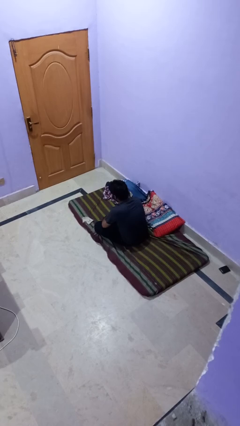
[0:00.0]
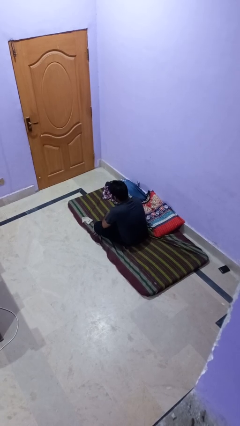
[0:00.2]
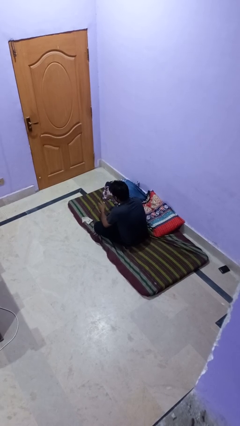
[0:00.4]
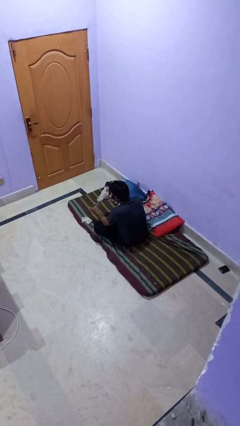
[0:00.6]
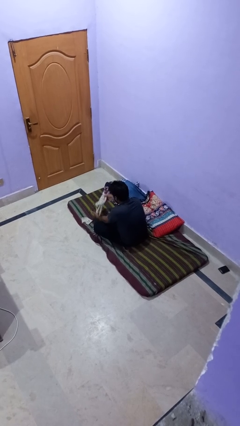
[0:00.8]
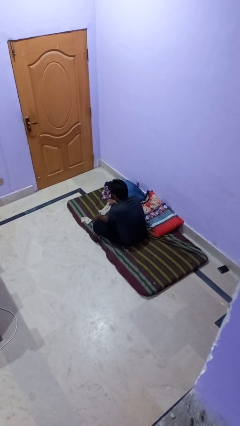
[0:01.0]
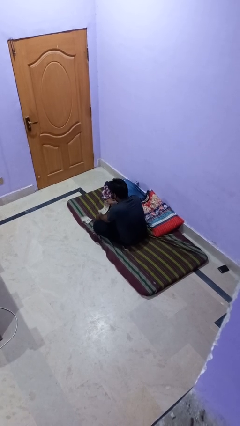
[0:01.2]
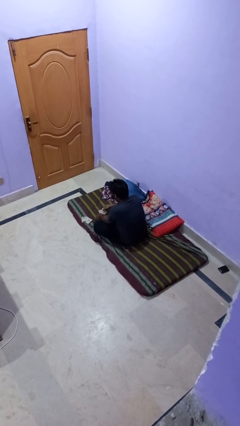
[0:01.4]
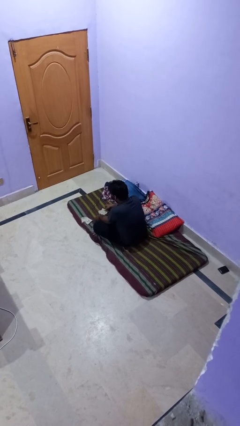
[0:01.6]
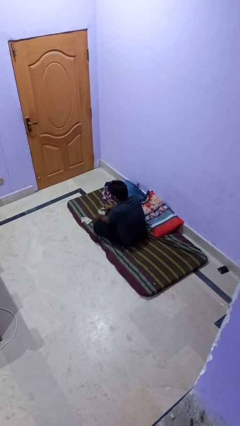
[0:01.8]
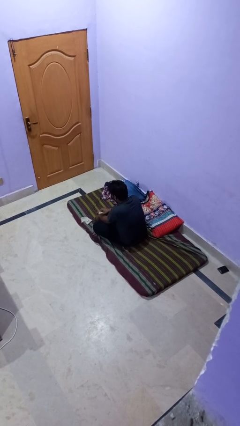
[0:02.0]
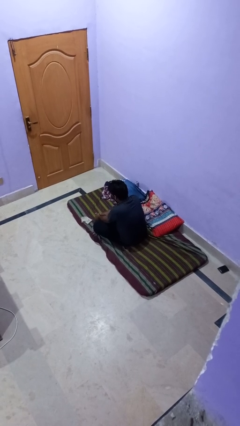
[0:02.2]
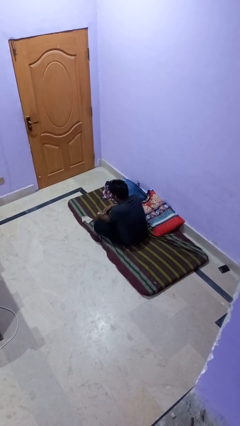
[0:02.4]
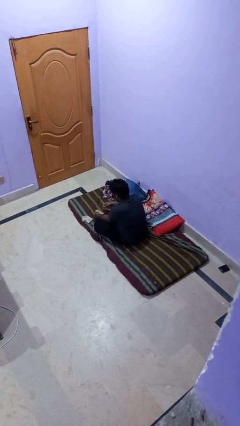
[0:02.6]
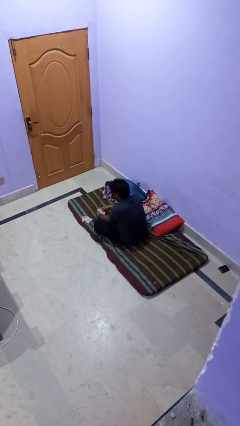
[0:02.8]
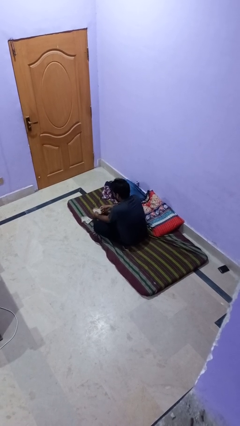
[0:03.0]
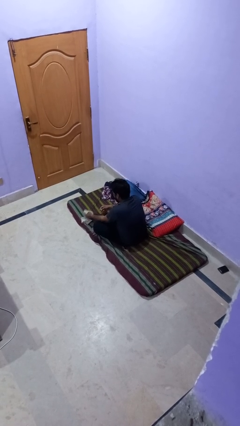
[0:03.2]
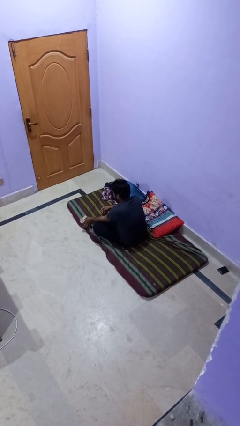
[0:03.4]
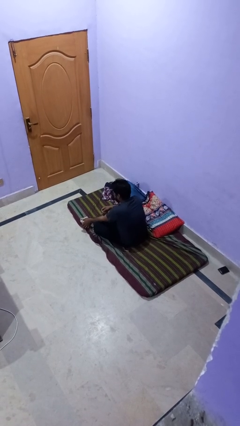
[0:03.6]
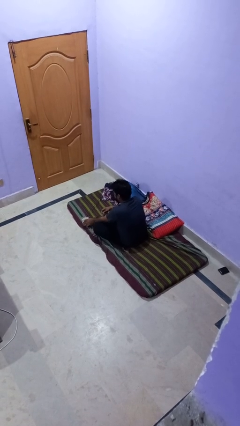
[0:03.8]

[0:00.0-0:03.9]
person folds socks

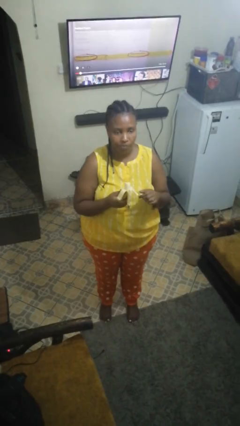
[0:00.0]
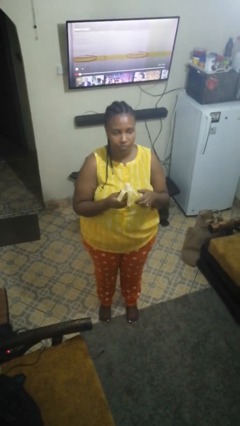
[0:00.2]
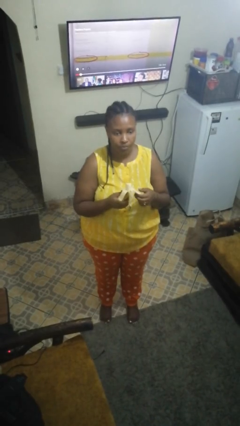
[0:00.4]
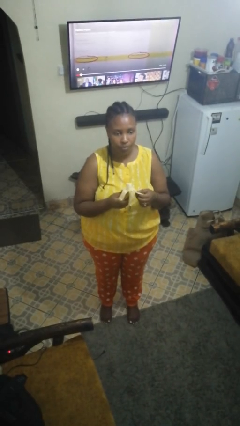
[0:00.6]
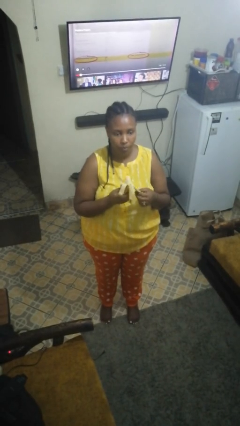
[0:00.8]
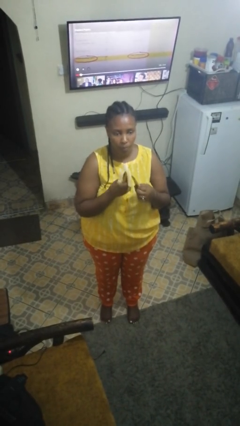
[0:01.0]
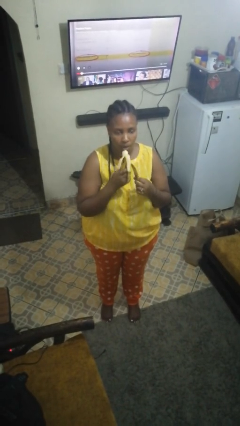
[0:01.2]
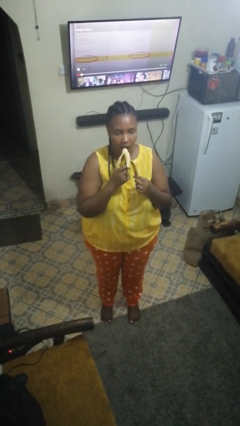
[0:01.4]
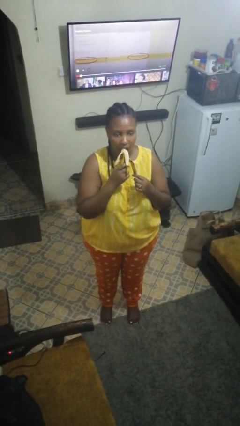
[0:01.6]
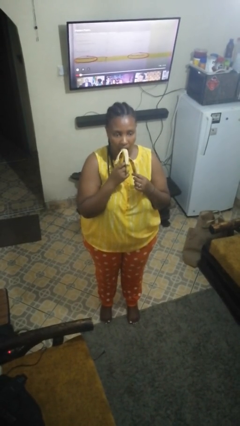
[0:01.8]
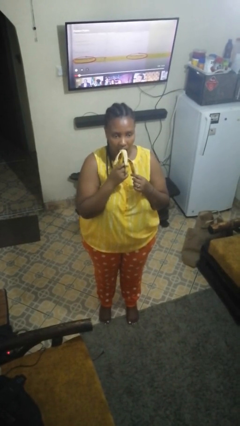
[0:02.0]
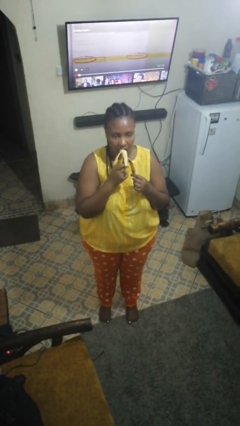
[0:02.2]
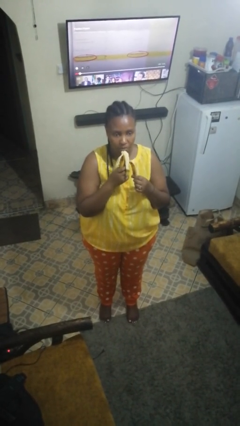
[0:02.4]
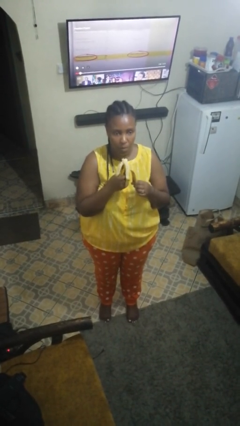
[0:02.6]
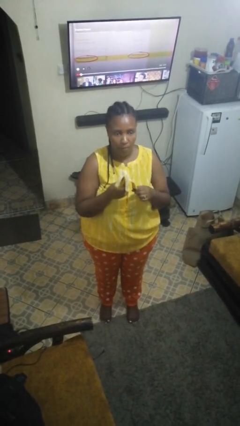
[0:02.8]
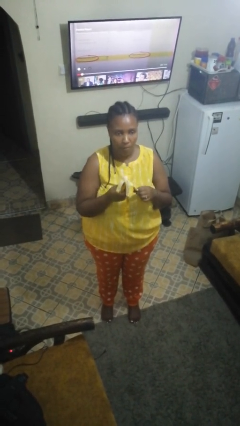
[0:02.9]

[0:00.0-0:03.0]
person eats banana

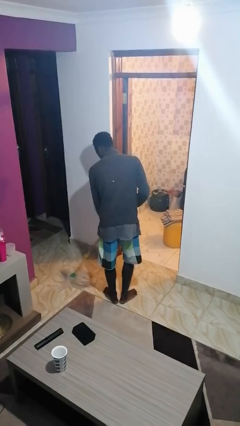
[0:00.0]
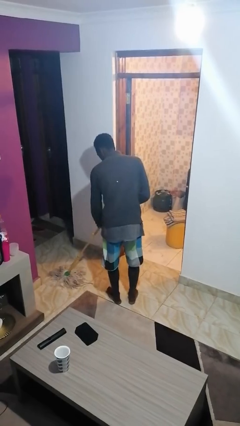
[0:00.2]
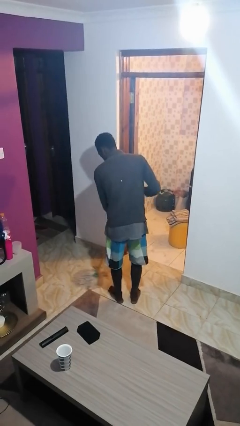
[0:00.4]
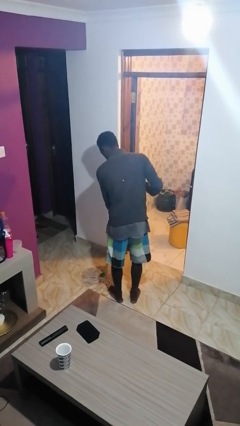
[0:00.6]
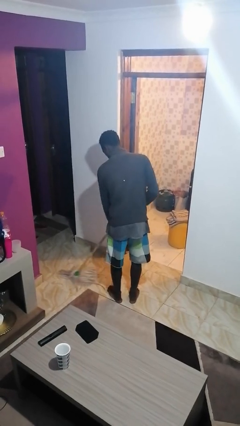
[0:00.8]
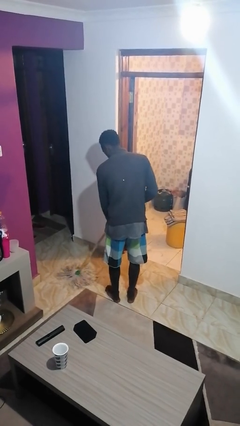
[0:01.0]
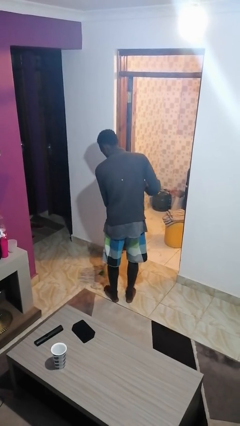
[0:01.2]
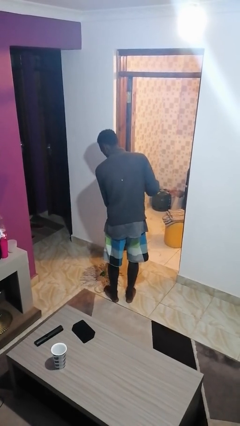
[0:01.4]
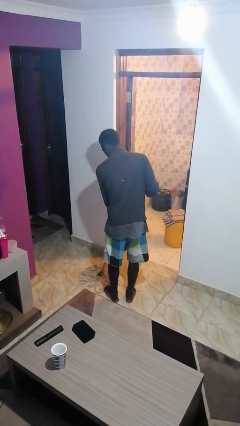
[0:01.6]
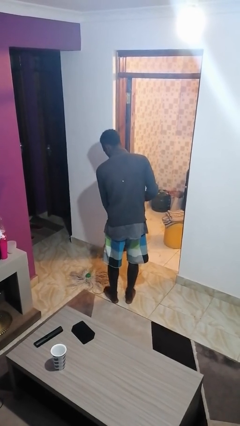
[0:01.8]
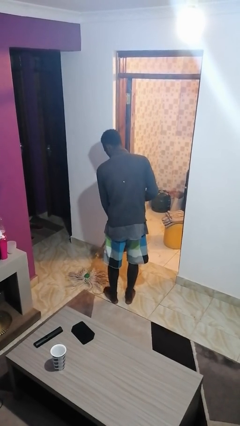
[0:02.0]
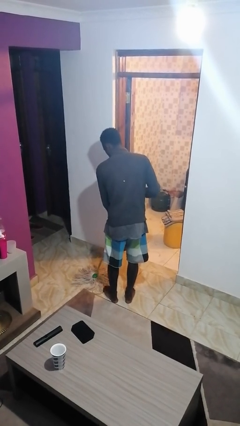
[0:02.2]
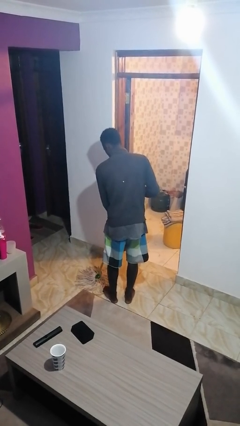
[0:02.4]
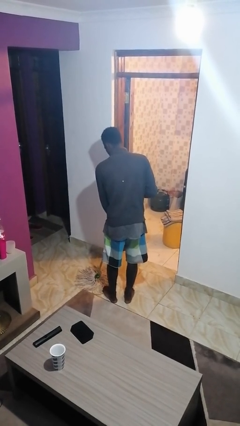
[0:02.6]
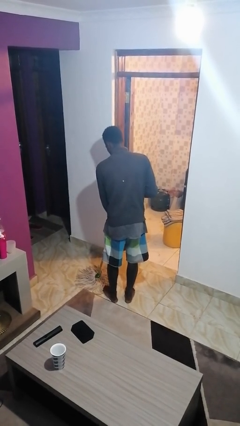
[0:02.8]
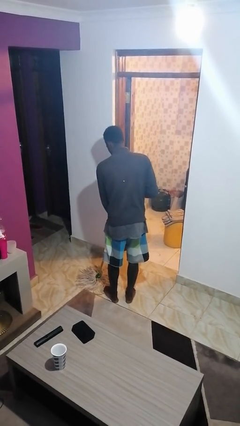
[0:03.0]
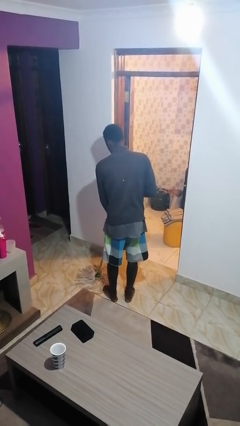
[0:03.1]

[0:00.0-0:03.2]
person mops

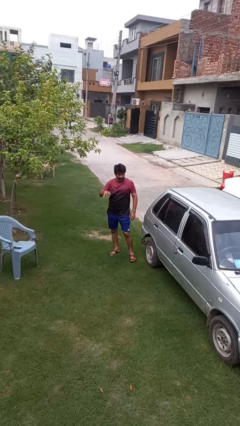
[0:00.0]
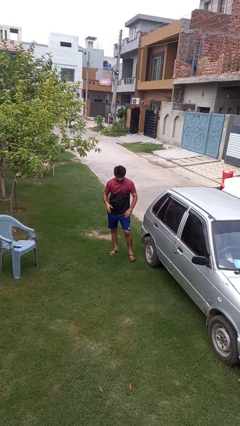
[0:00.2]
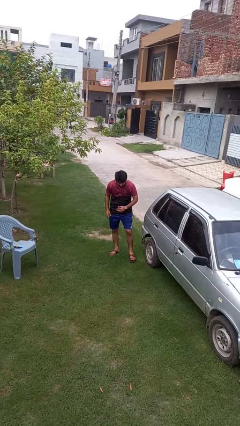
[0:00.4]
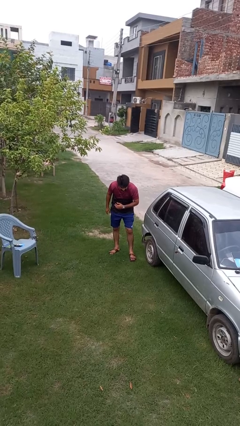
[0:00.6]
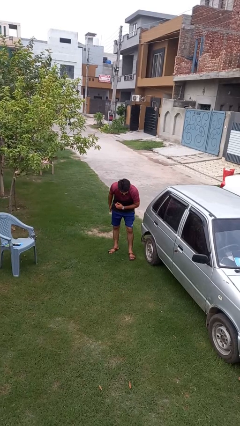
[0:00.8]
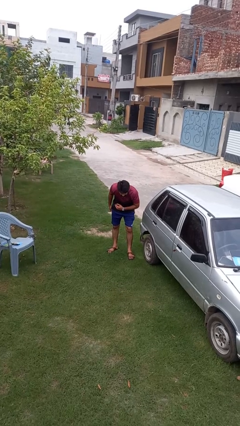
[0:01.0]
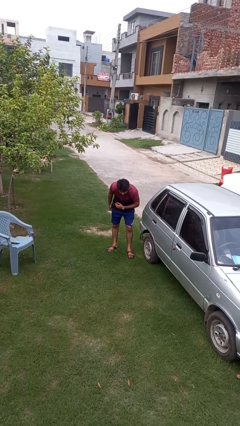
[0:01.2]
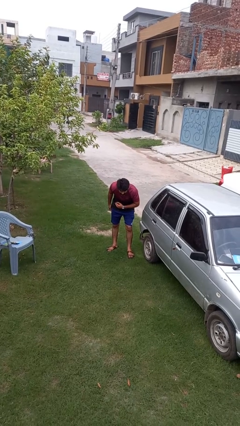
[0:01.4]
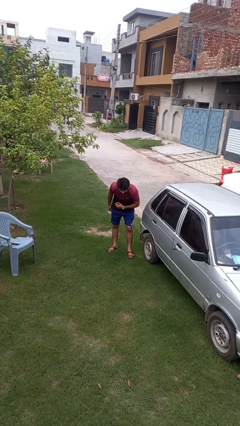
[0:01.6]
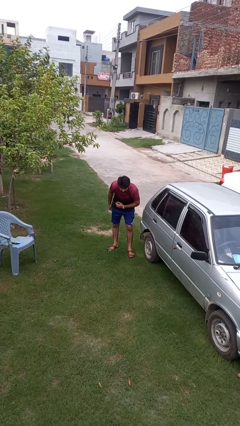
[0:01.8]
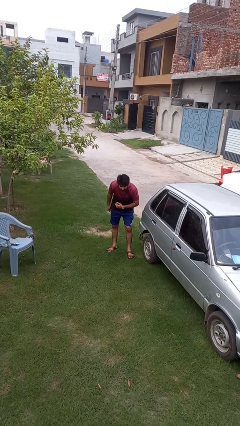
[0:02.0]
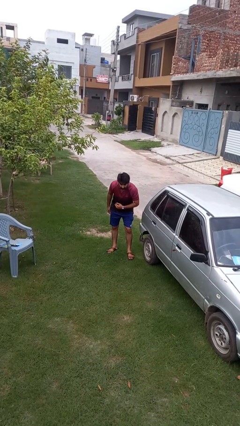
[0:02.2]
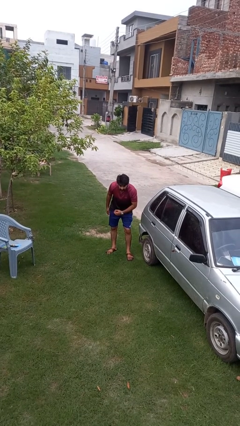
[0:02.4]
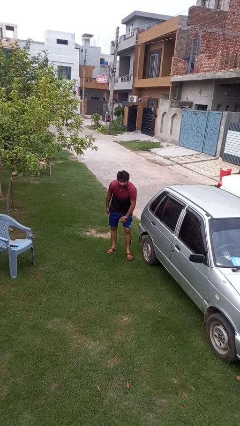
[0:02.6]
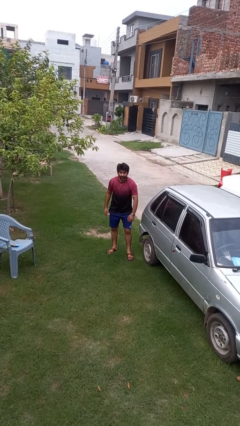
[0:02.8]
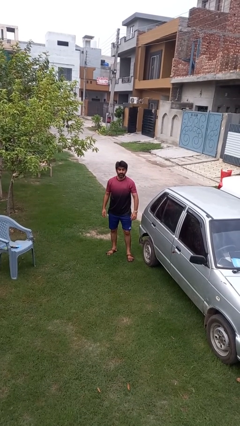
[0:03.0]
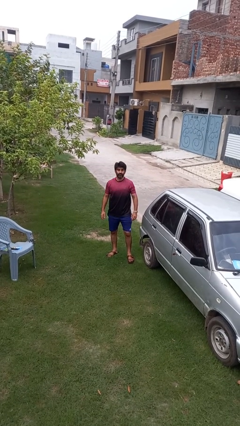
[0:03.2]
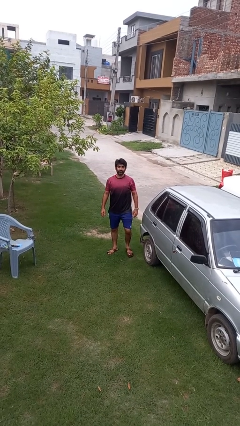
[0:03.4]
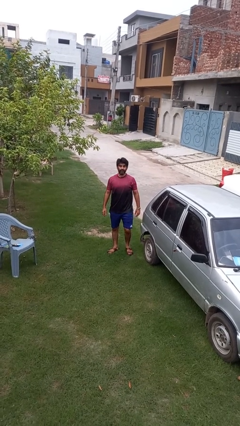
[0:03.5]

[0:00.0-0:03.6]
person bows

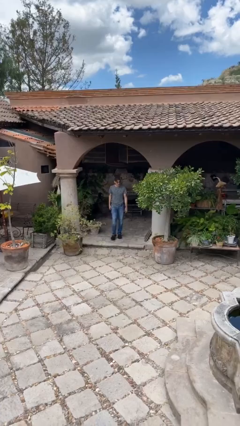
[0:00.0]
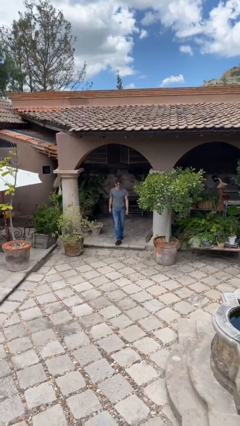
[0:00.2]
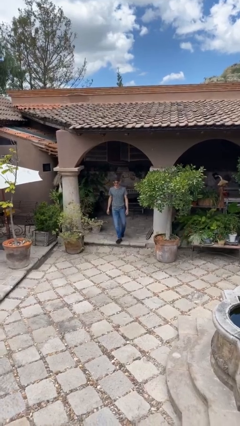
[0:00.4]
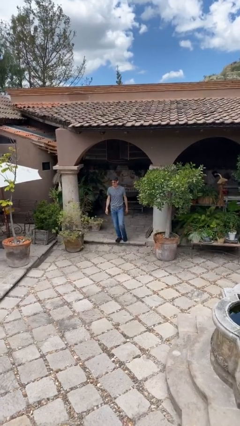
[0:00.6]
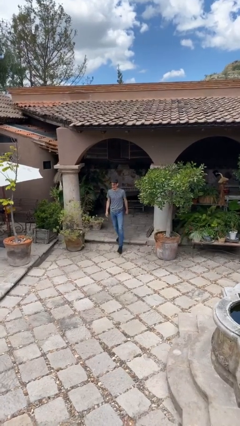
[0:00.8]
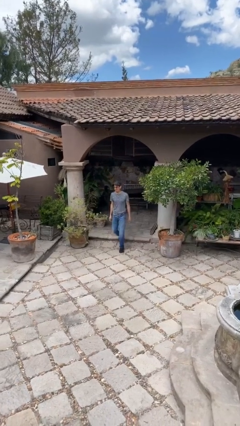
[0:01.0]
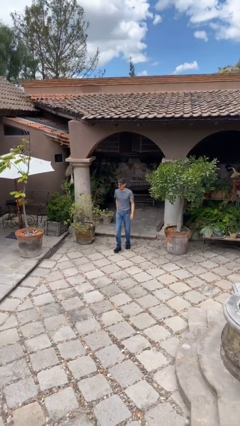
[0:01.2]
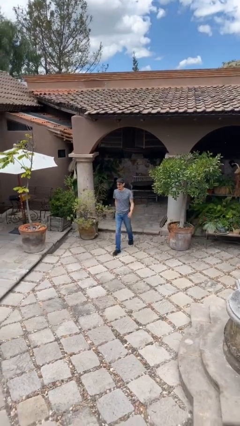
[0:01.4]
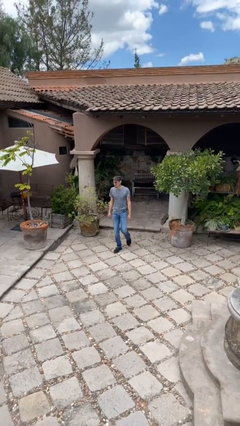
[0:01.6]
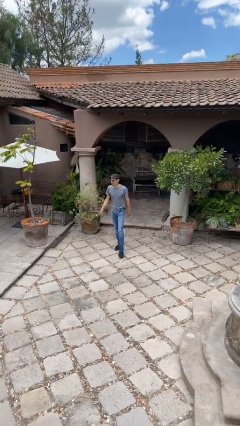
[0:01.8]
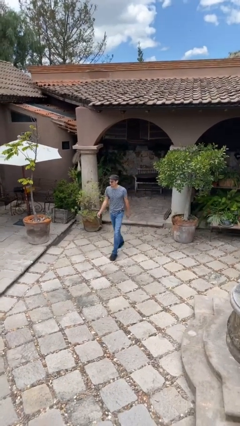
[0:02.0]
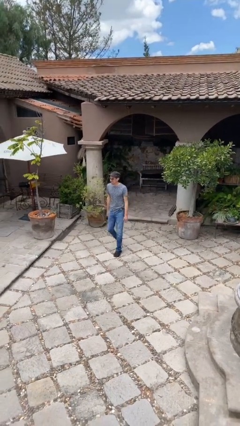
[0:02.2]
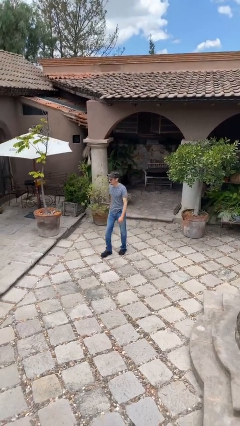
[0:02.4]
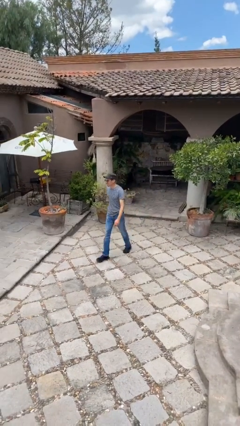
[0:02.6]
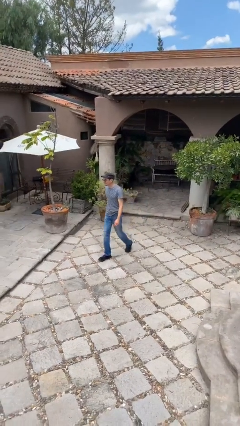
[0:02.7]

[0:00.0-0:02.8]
person enters scene through structure

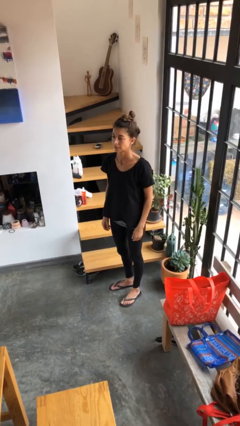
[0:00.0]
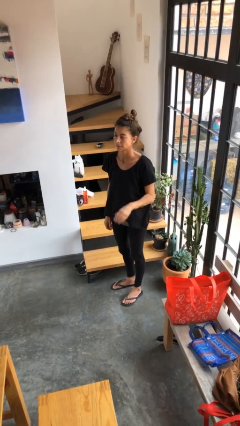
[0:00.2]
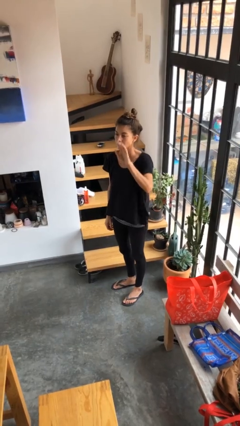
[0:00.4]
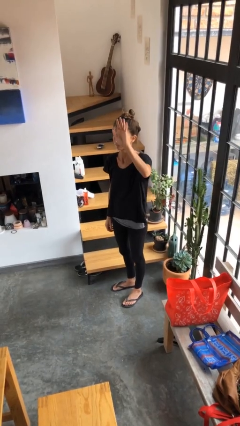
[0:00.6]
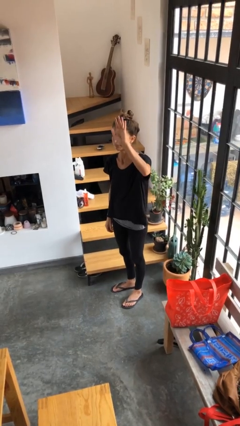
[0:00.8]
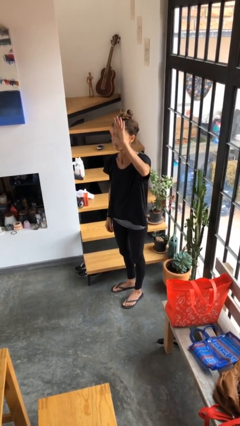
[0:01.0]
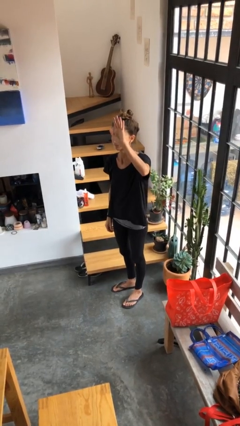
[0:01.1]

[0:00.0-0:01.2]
person gestures raise hand

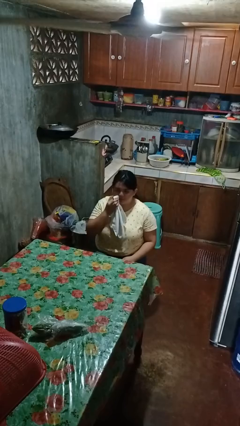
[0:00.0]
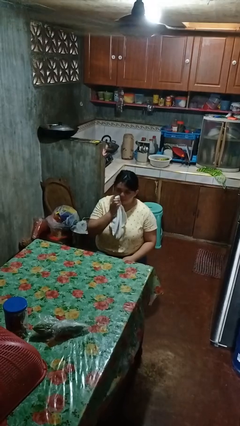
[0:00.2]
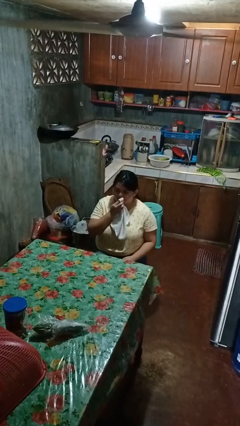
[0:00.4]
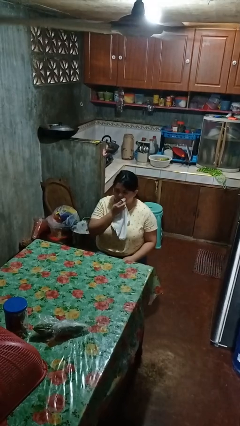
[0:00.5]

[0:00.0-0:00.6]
person wipes mouth with napkin
